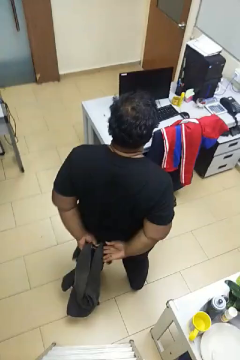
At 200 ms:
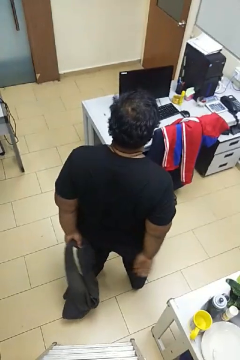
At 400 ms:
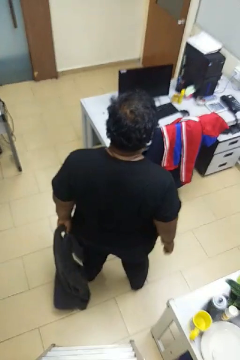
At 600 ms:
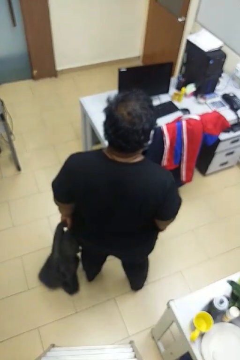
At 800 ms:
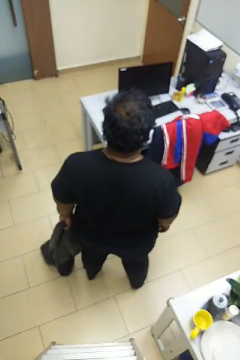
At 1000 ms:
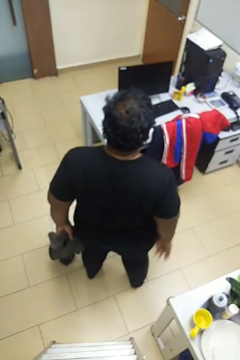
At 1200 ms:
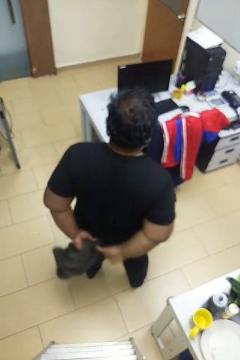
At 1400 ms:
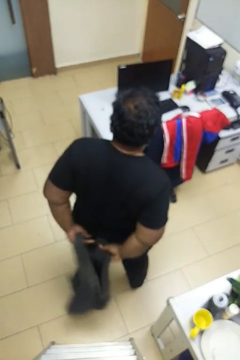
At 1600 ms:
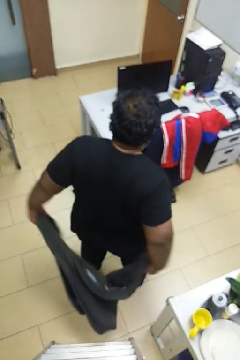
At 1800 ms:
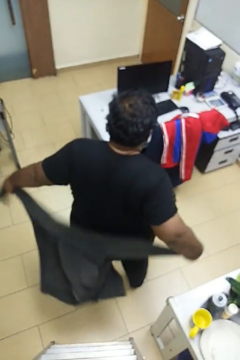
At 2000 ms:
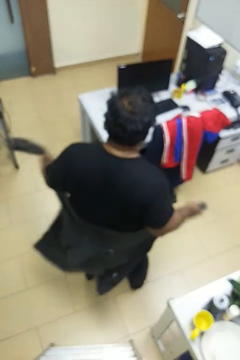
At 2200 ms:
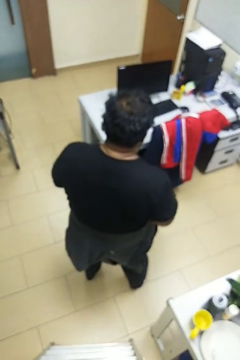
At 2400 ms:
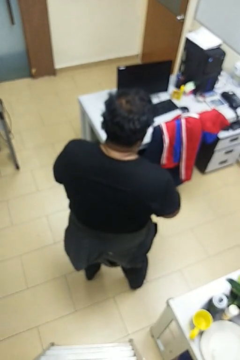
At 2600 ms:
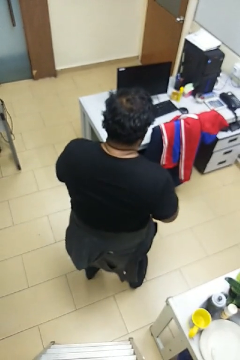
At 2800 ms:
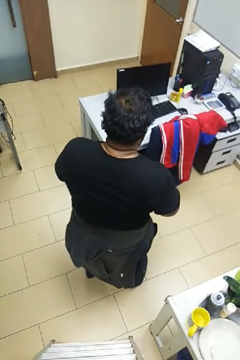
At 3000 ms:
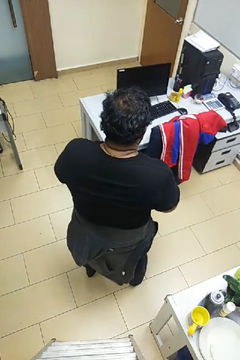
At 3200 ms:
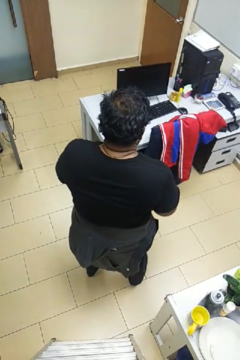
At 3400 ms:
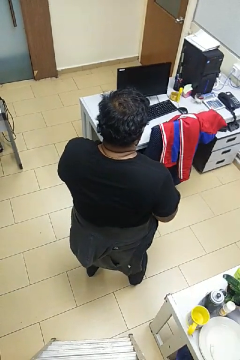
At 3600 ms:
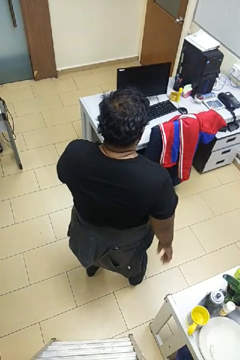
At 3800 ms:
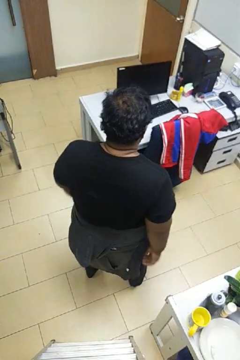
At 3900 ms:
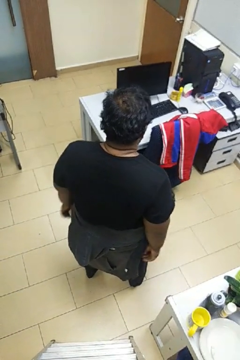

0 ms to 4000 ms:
person ties jacket around waist

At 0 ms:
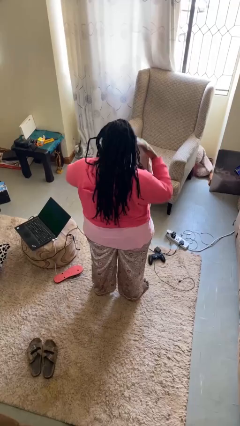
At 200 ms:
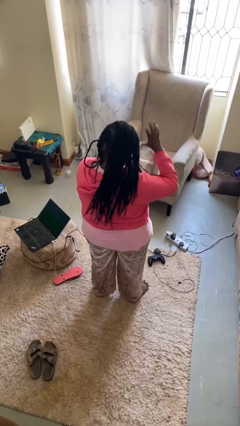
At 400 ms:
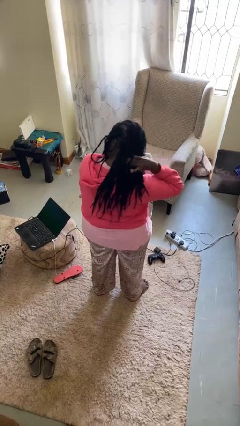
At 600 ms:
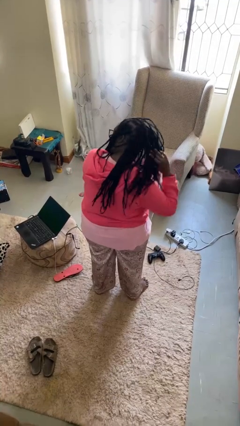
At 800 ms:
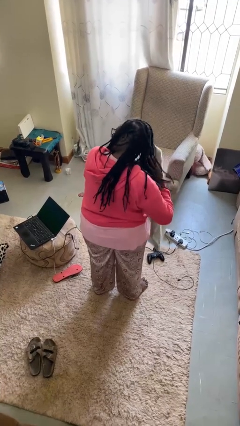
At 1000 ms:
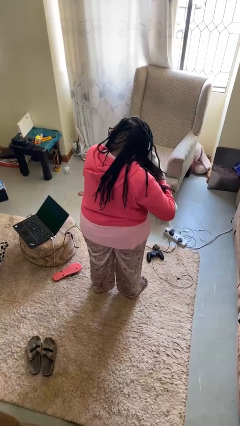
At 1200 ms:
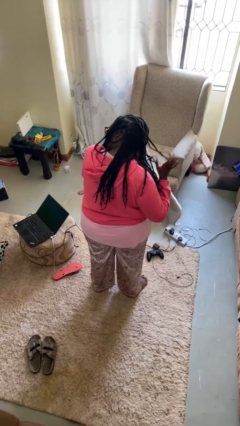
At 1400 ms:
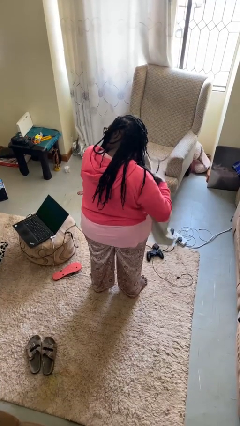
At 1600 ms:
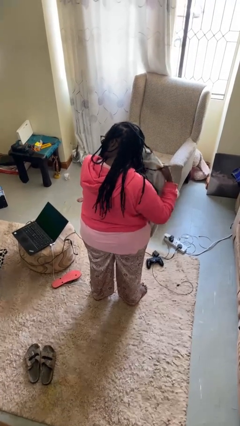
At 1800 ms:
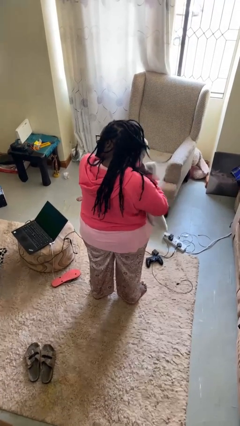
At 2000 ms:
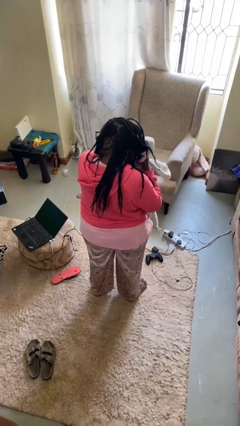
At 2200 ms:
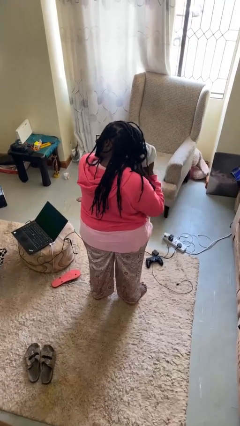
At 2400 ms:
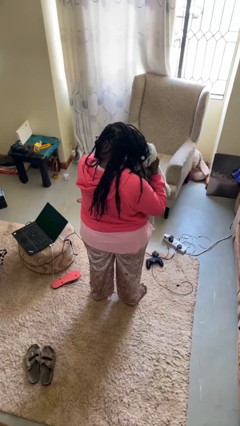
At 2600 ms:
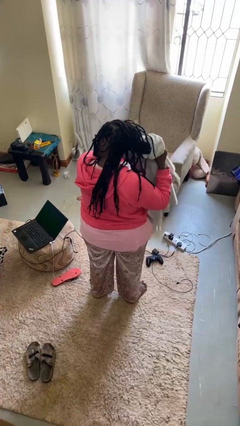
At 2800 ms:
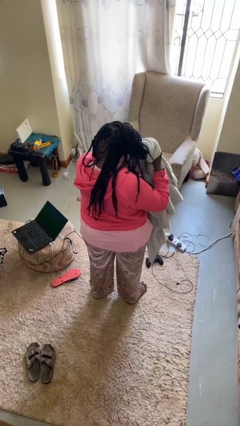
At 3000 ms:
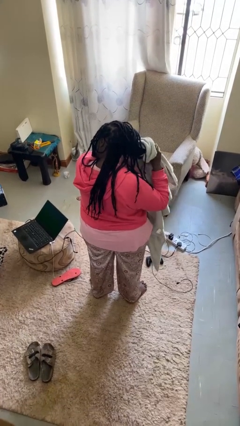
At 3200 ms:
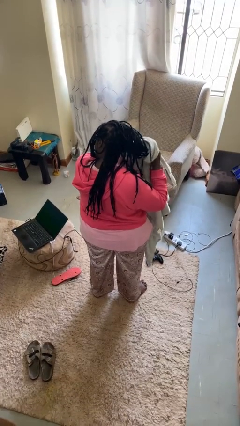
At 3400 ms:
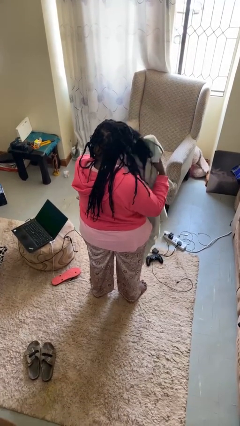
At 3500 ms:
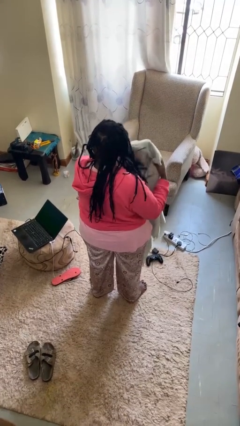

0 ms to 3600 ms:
person dries hair with towel

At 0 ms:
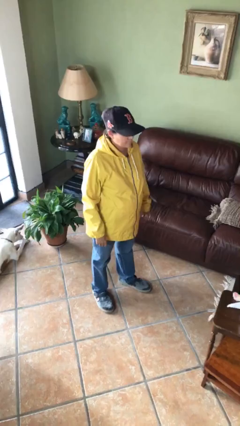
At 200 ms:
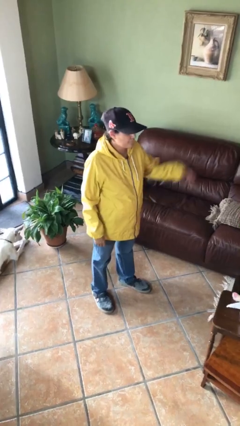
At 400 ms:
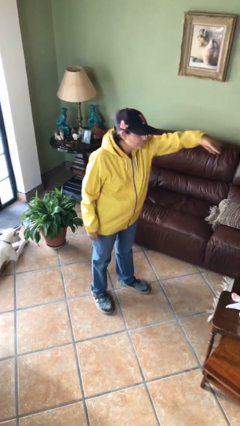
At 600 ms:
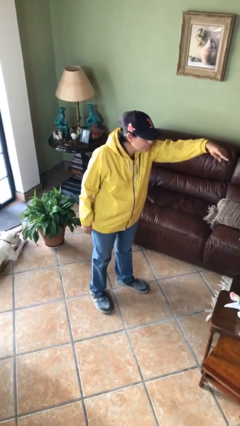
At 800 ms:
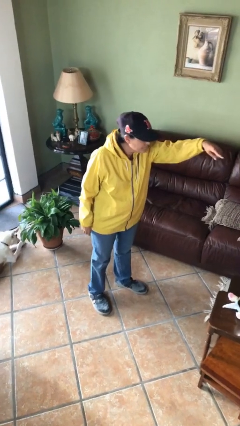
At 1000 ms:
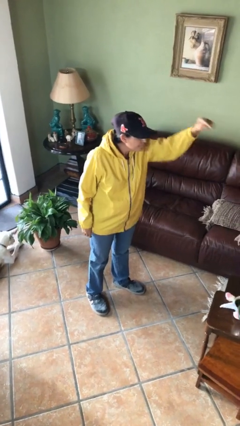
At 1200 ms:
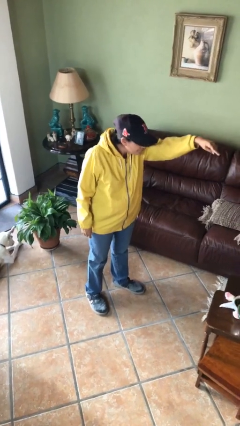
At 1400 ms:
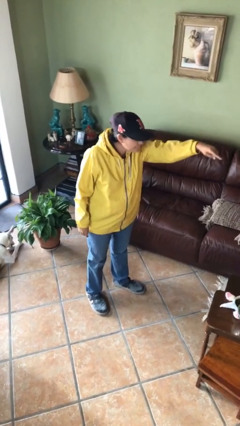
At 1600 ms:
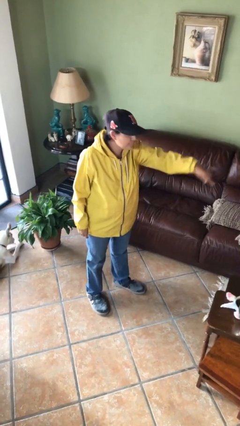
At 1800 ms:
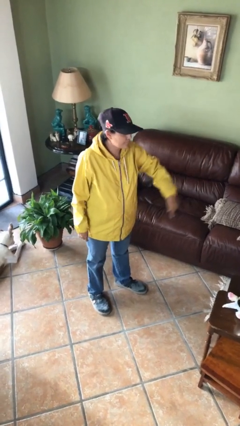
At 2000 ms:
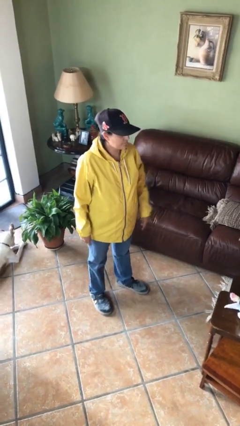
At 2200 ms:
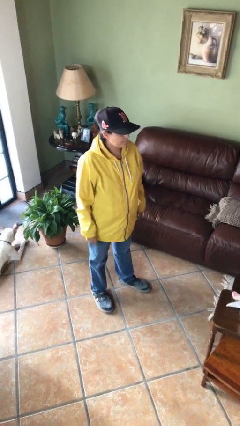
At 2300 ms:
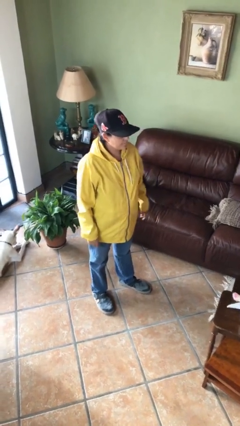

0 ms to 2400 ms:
person points at person

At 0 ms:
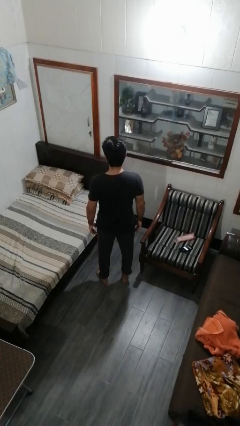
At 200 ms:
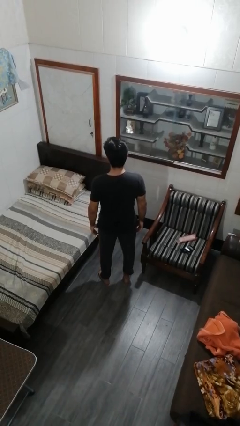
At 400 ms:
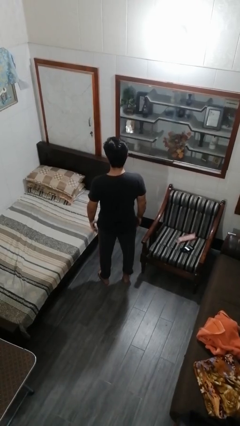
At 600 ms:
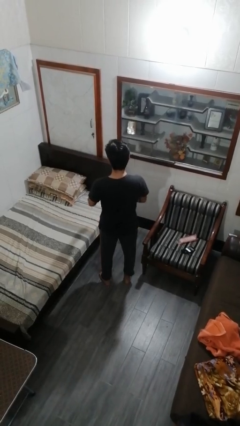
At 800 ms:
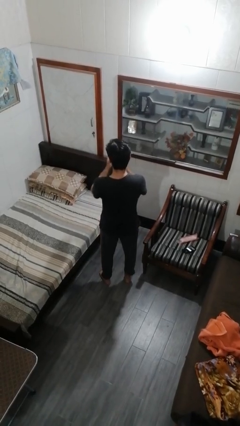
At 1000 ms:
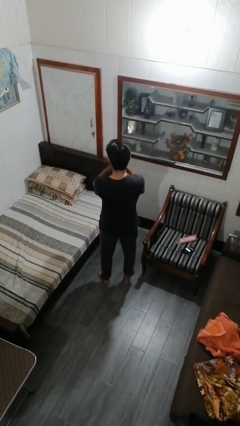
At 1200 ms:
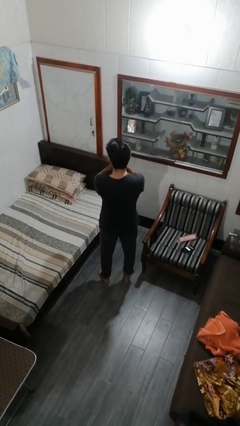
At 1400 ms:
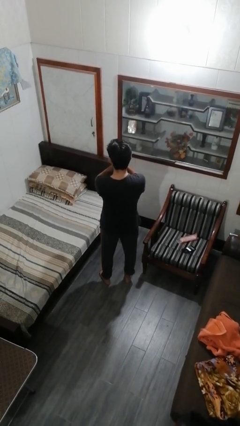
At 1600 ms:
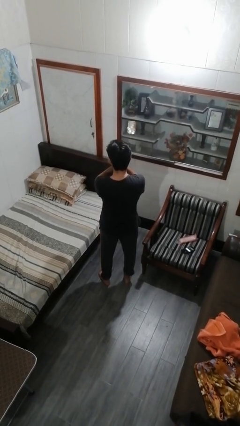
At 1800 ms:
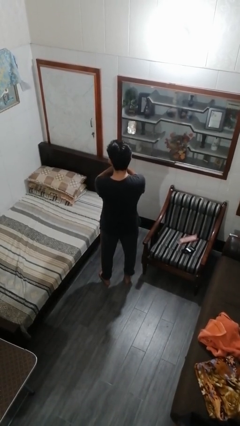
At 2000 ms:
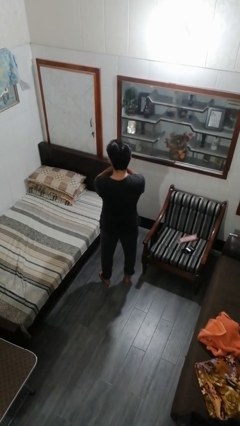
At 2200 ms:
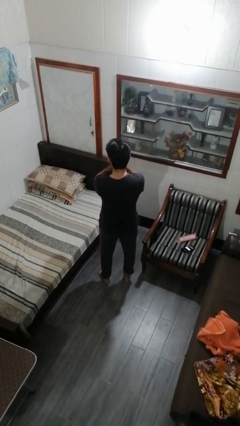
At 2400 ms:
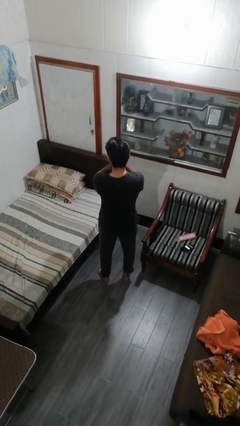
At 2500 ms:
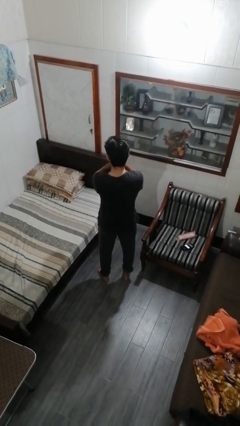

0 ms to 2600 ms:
person covers face with hands

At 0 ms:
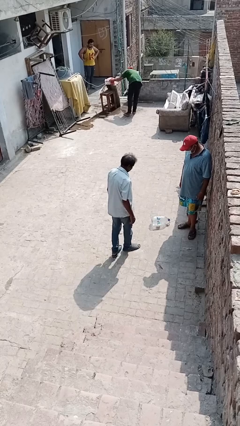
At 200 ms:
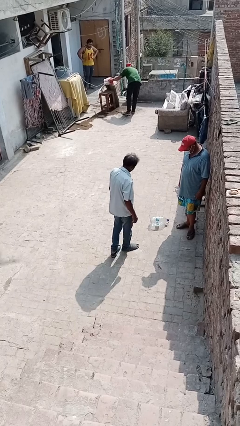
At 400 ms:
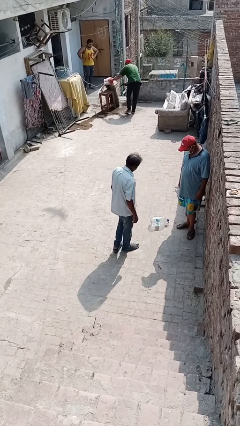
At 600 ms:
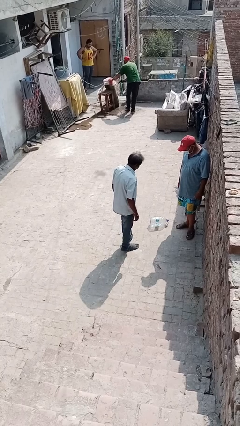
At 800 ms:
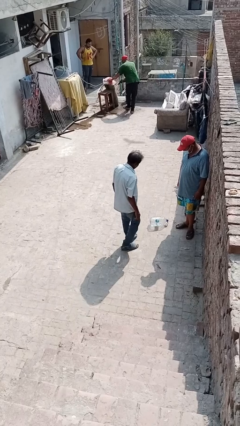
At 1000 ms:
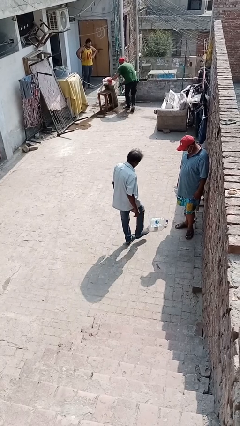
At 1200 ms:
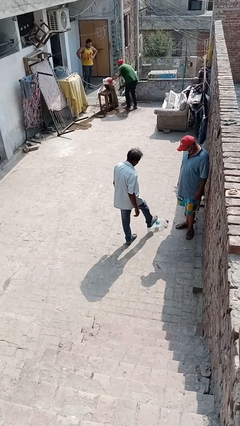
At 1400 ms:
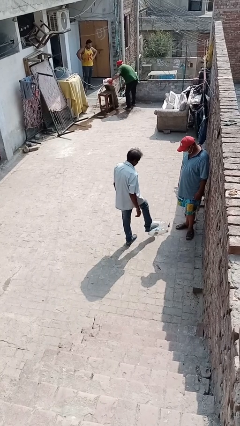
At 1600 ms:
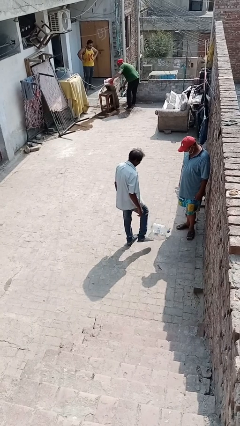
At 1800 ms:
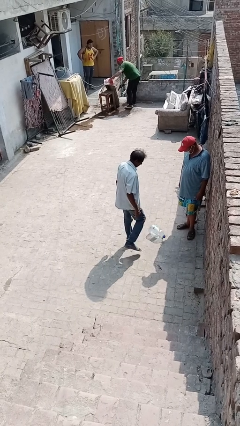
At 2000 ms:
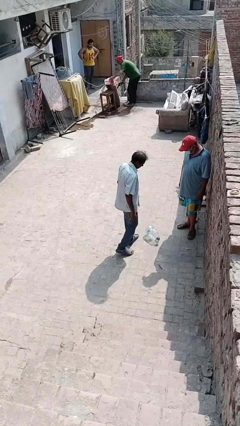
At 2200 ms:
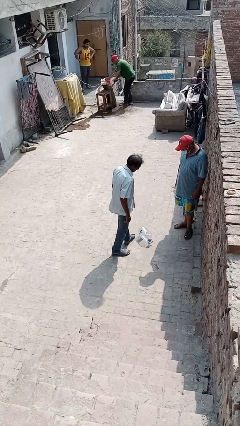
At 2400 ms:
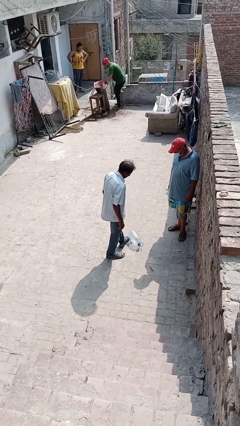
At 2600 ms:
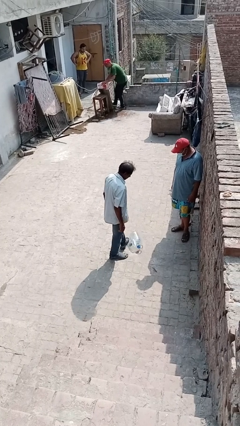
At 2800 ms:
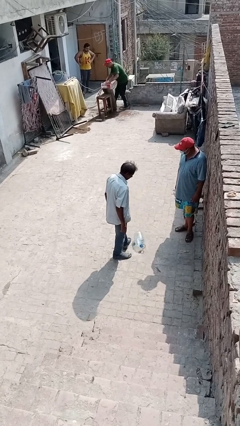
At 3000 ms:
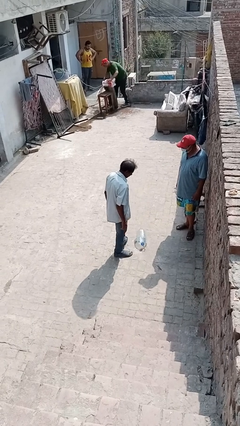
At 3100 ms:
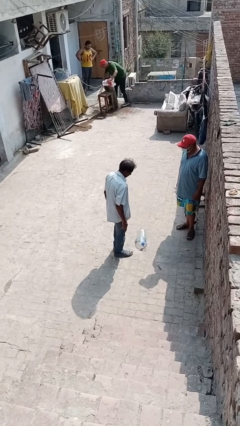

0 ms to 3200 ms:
person kicks object to person

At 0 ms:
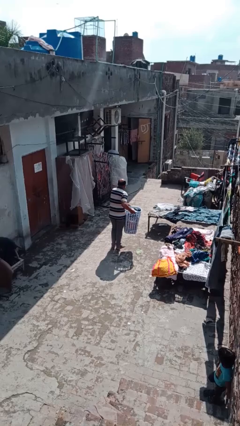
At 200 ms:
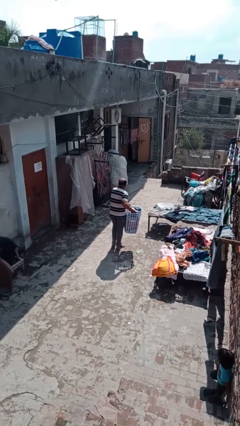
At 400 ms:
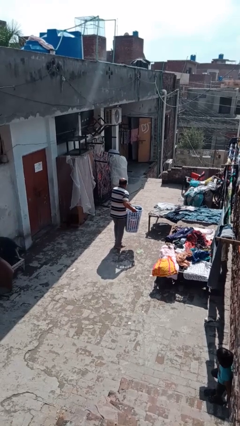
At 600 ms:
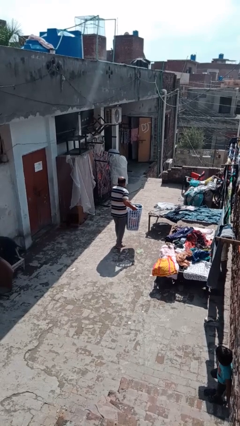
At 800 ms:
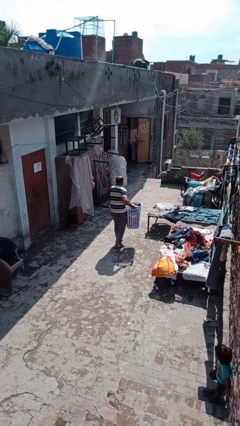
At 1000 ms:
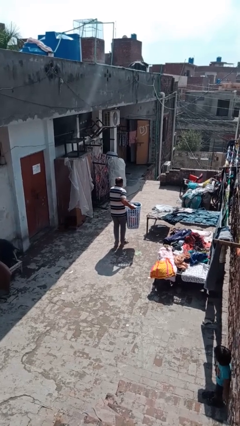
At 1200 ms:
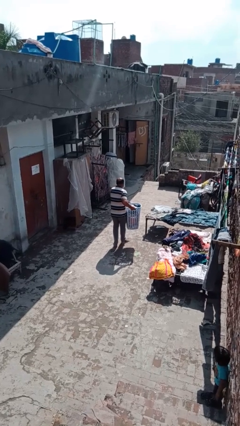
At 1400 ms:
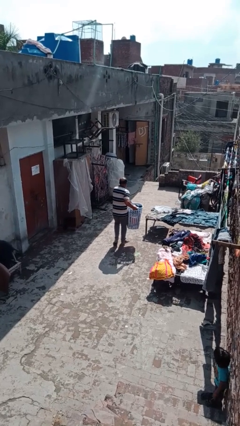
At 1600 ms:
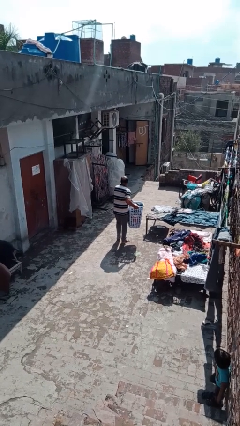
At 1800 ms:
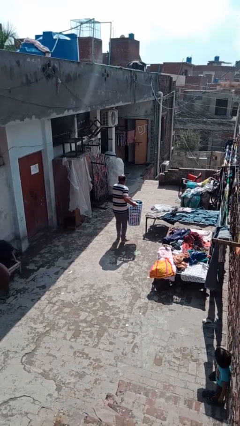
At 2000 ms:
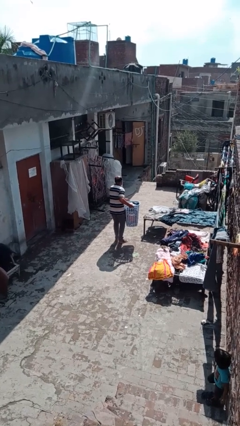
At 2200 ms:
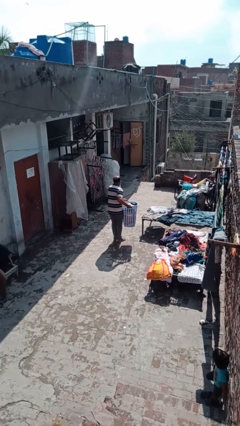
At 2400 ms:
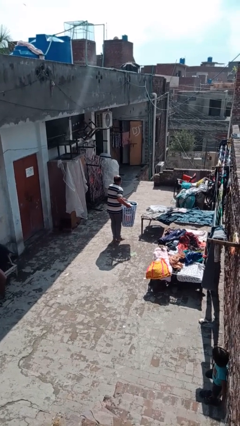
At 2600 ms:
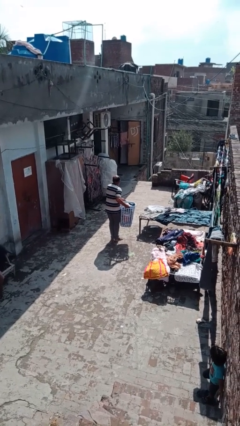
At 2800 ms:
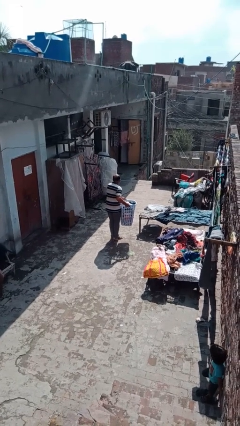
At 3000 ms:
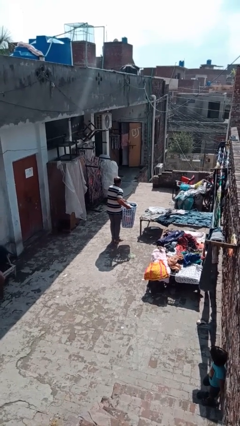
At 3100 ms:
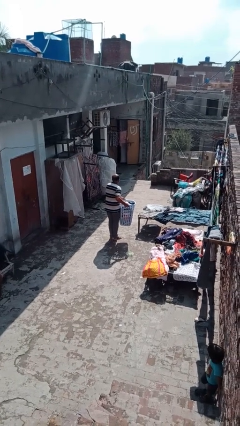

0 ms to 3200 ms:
person carries laundry basket
